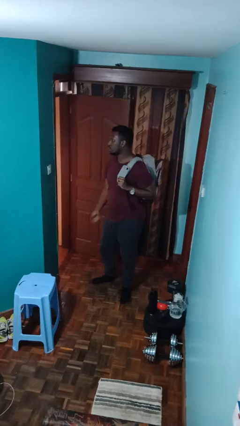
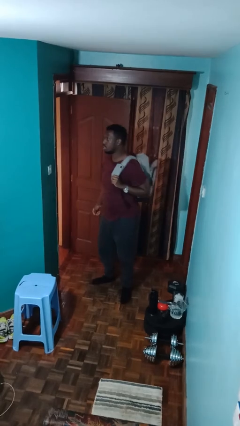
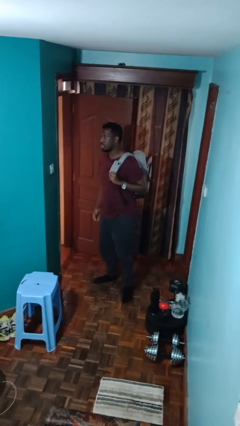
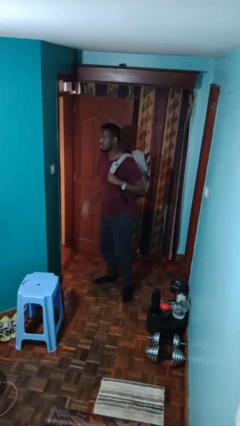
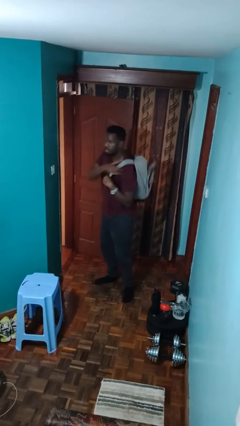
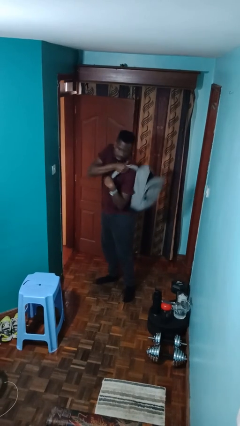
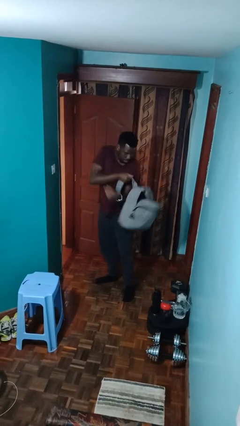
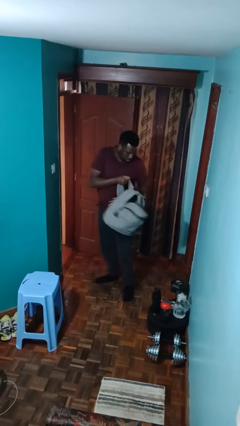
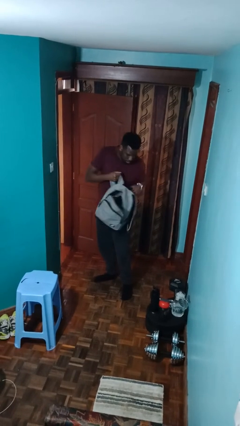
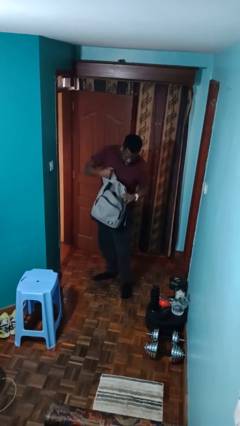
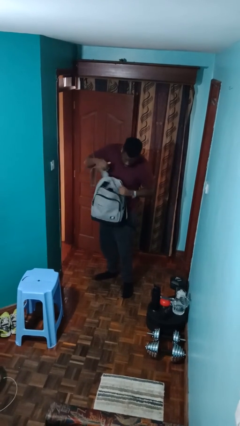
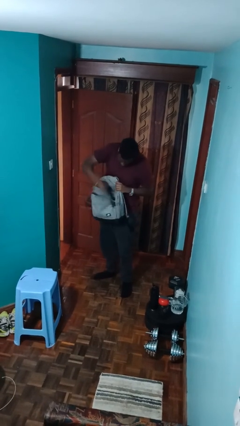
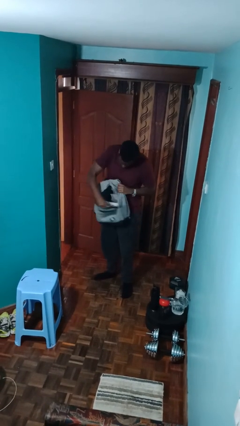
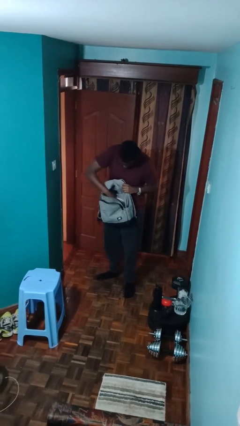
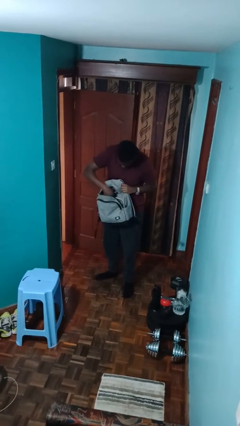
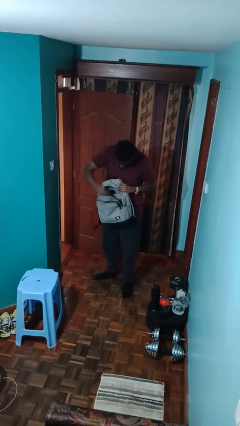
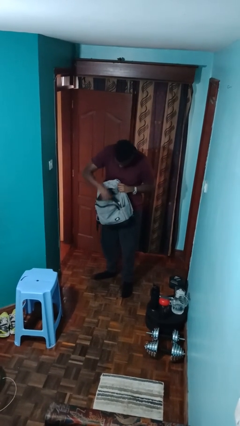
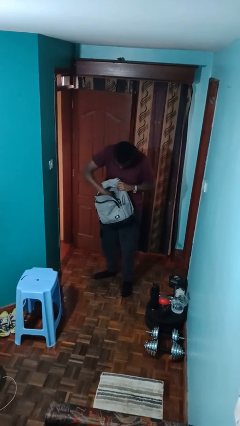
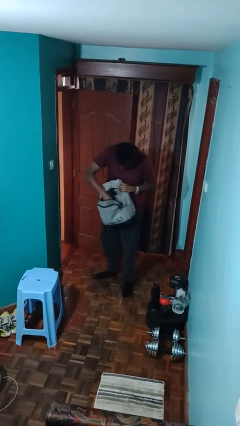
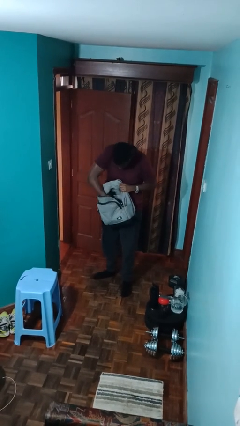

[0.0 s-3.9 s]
person searches in backpack

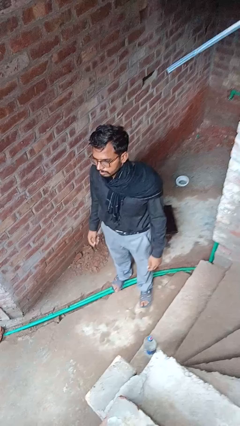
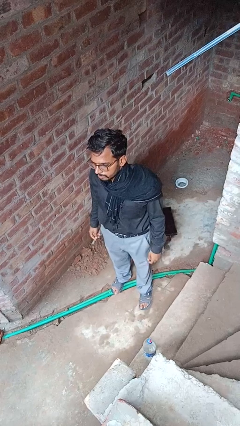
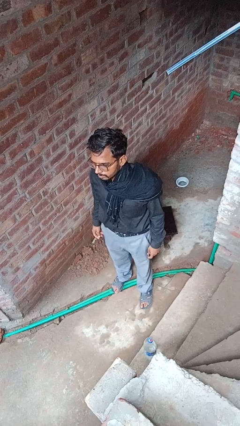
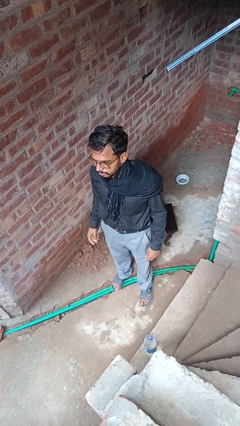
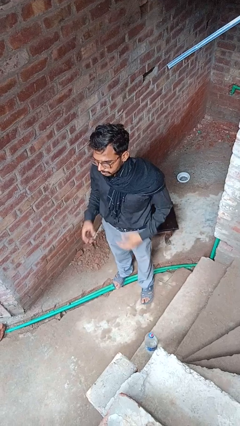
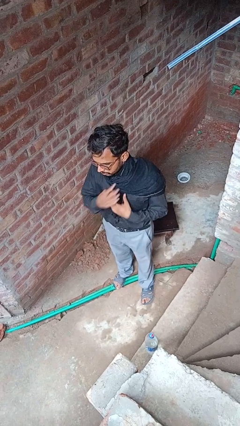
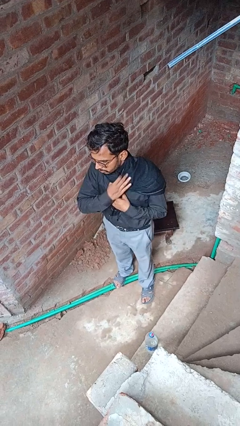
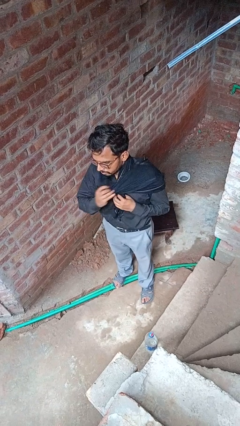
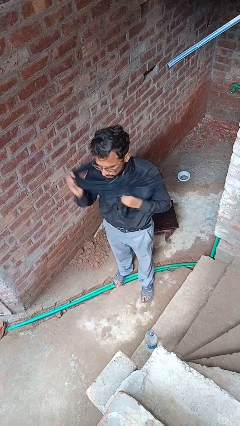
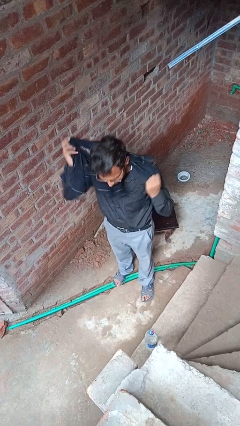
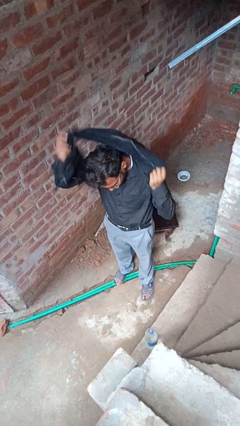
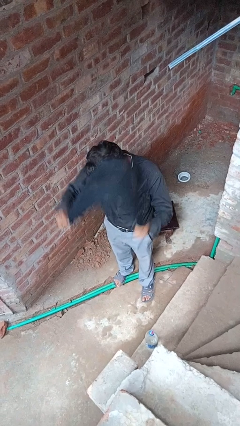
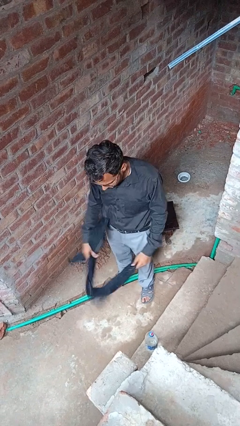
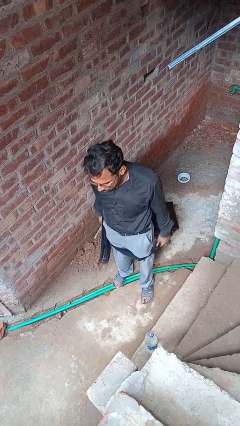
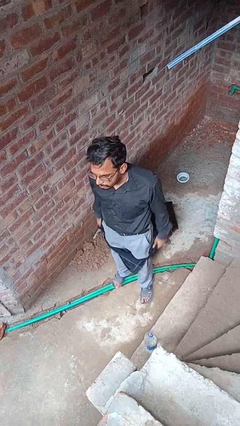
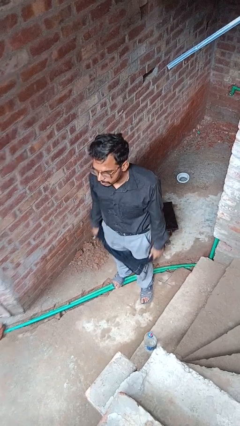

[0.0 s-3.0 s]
person takes off scarf

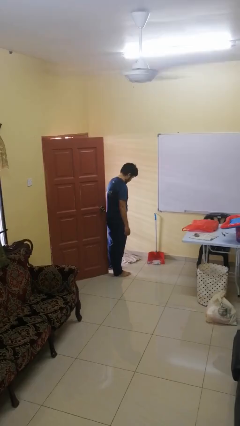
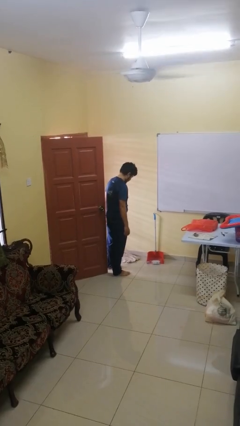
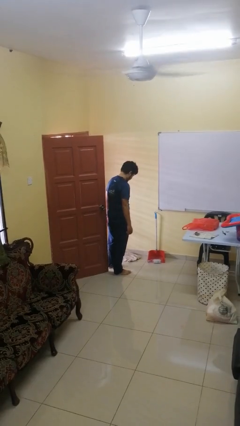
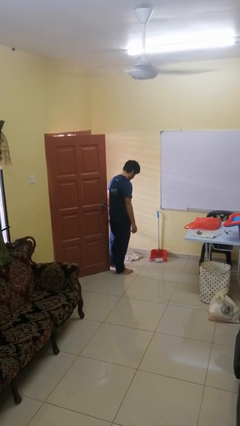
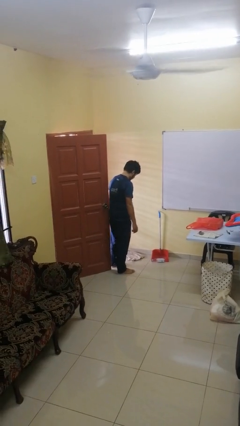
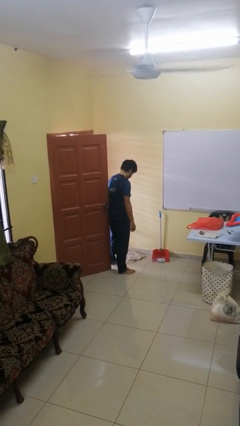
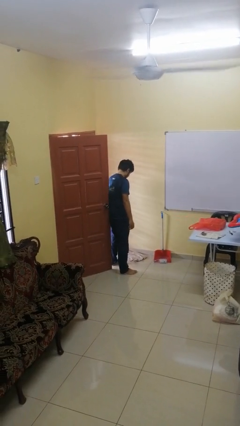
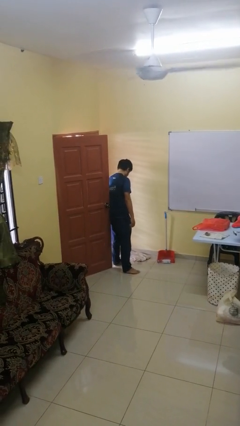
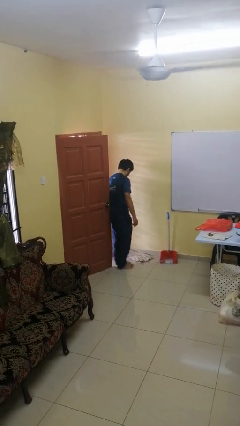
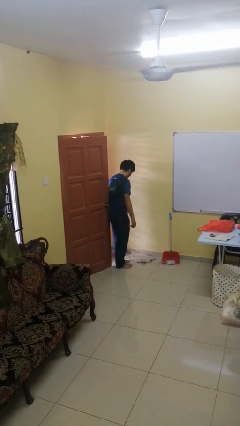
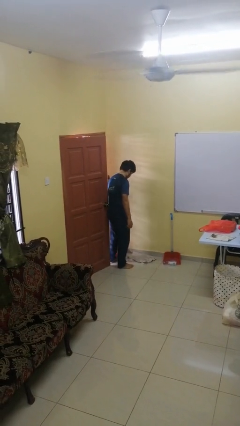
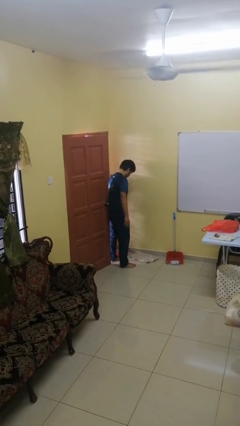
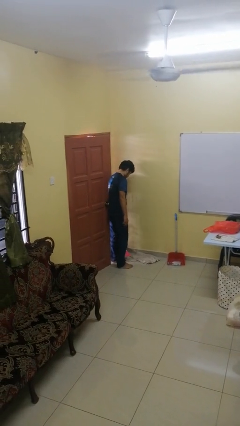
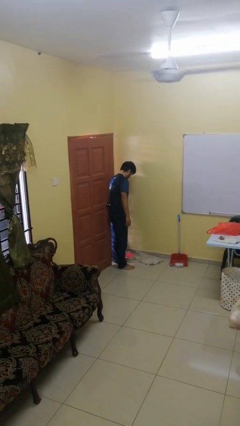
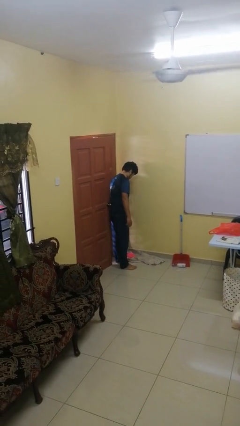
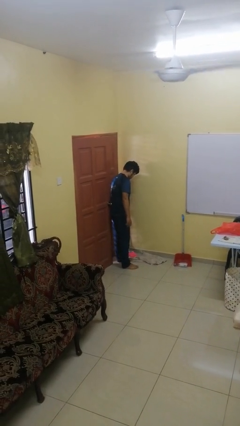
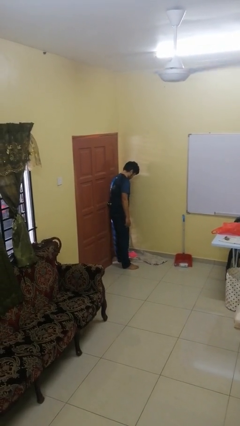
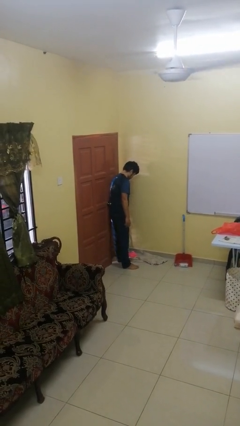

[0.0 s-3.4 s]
person closes door with hip

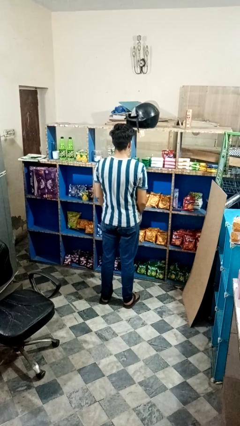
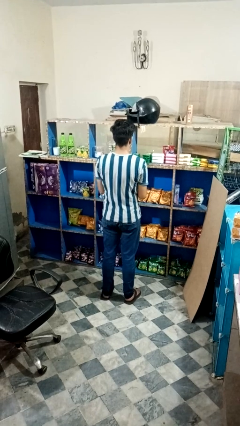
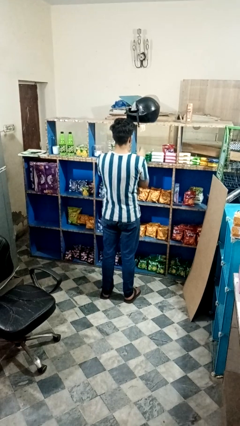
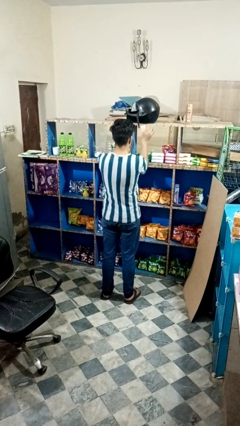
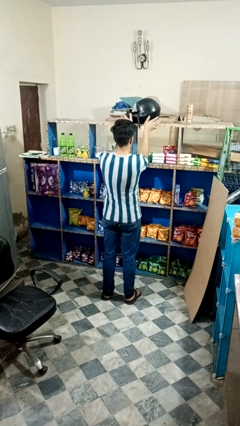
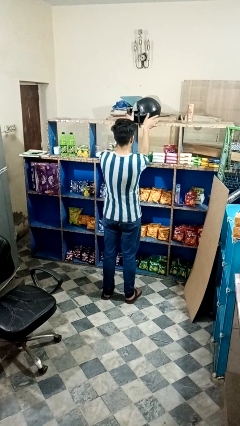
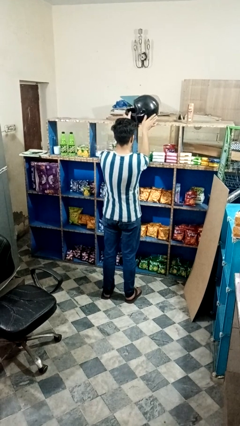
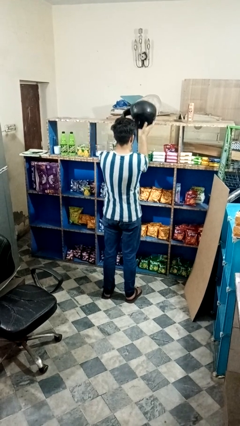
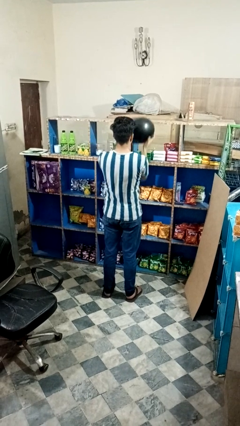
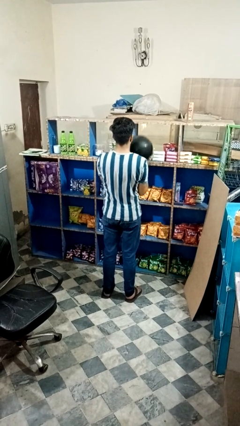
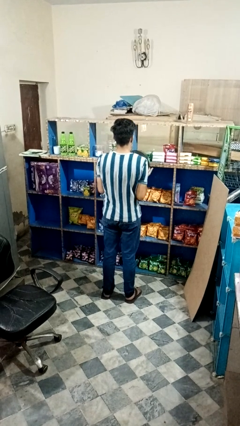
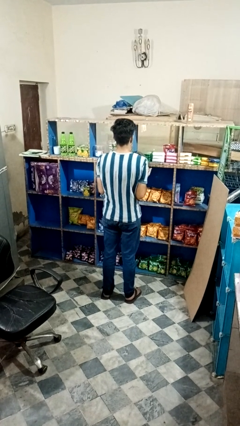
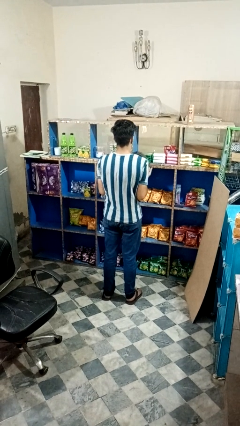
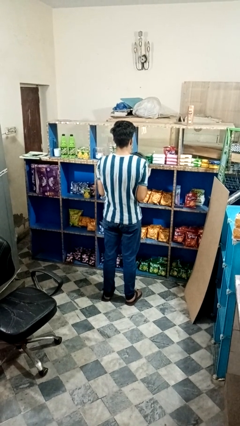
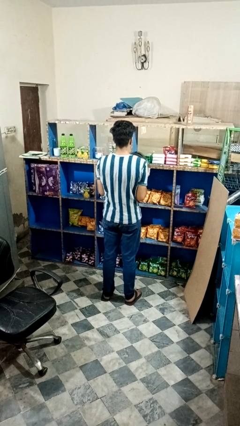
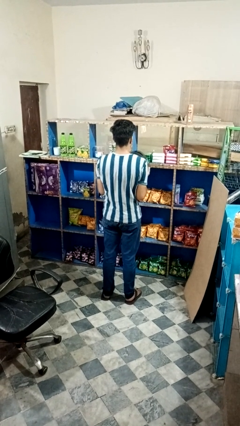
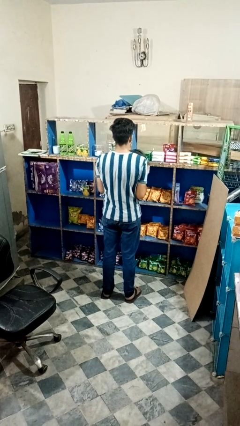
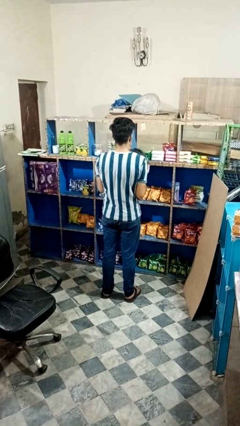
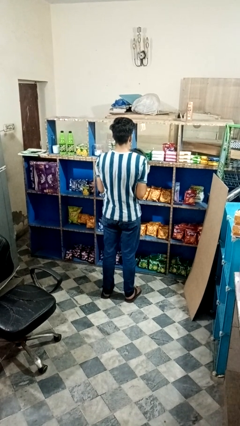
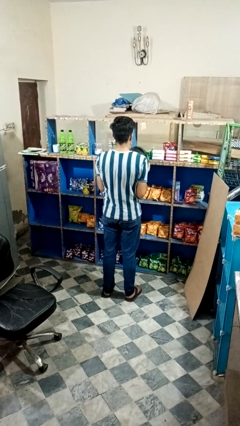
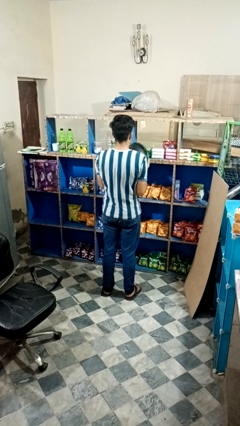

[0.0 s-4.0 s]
person picks up object from countertop

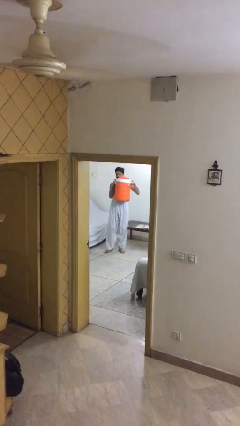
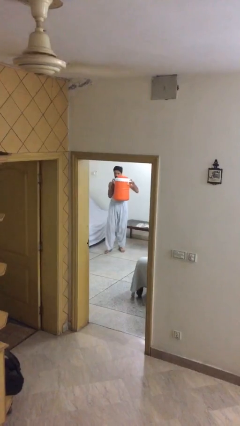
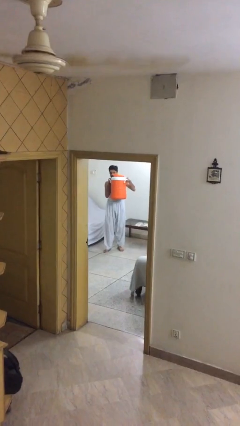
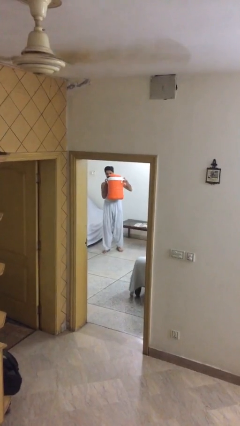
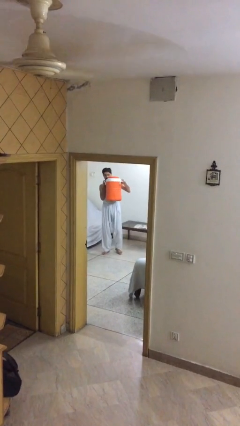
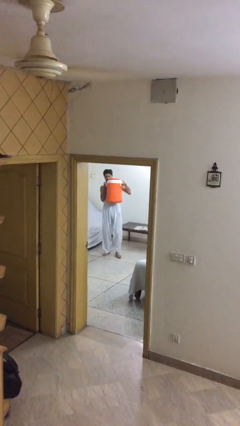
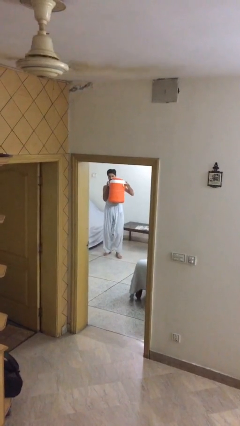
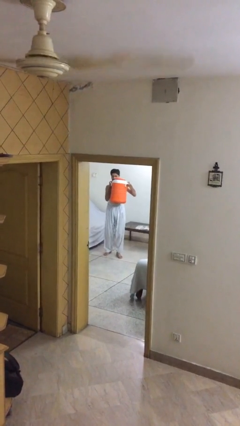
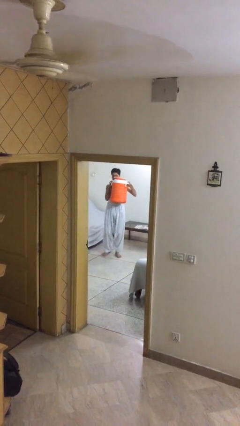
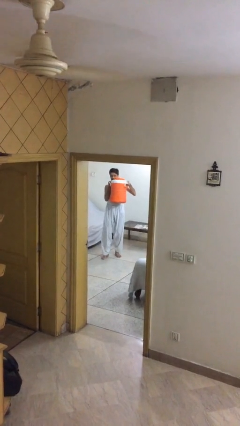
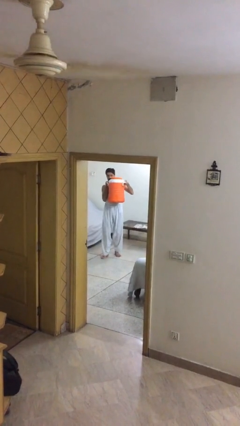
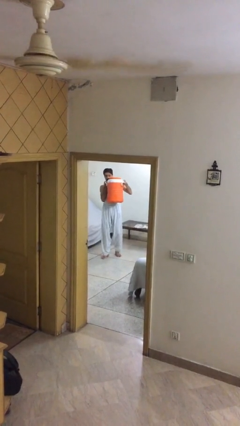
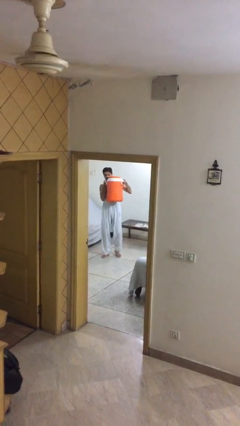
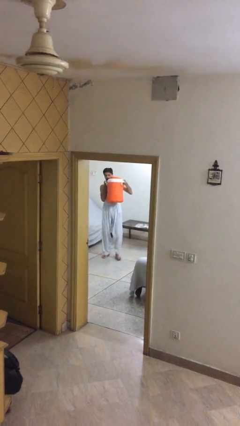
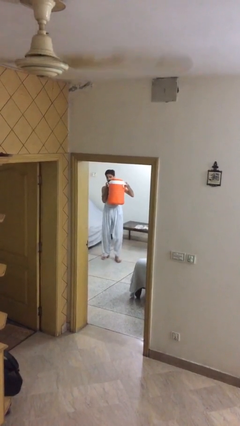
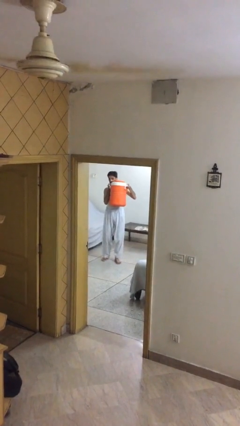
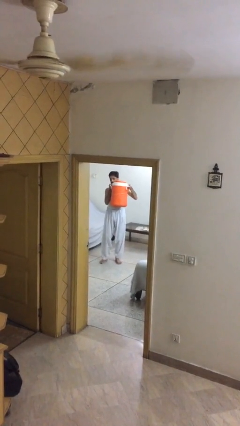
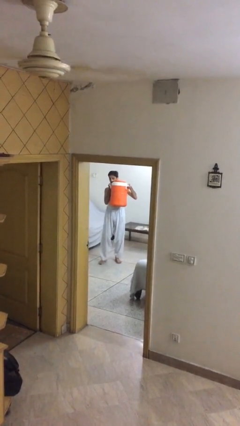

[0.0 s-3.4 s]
person carries heavy object
